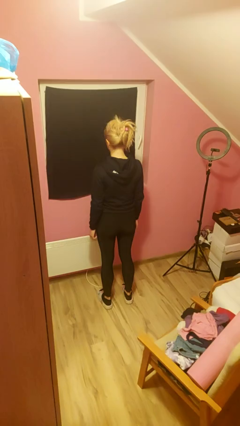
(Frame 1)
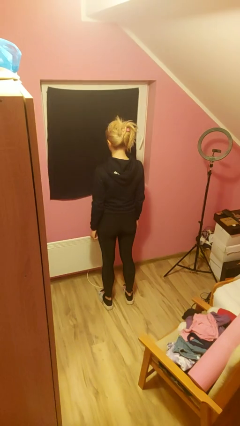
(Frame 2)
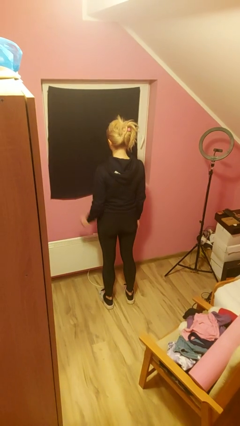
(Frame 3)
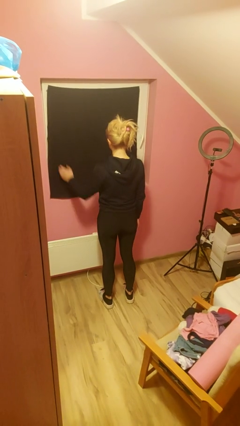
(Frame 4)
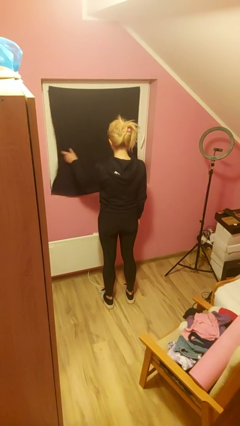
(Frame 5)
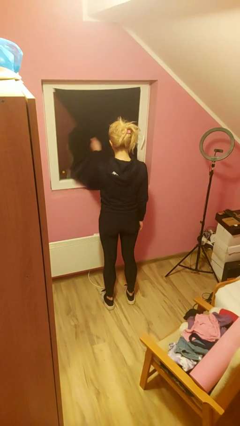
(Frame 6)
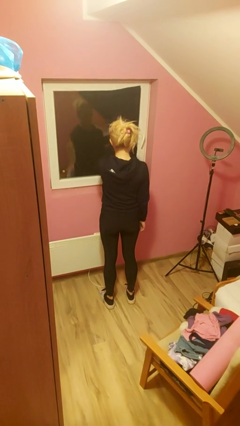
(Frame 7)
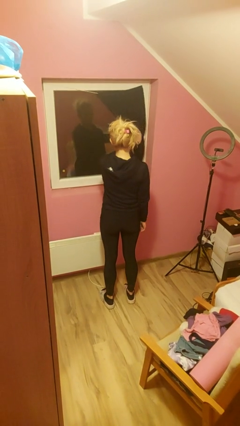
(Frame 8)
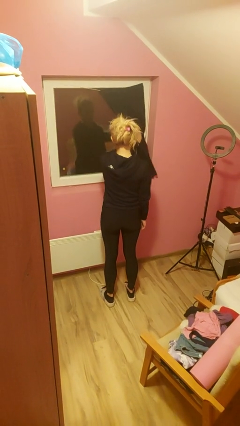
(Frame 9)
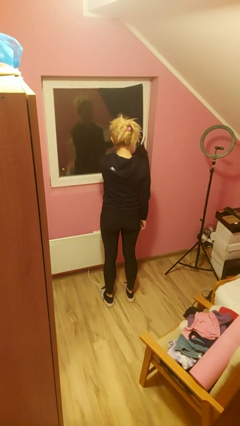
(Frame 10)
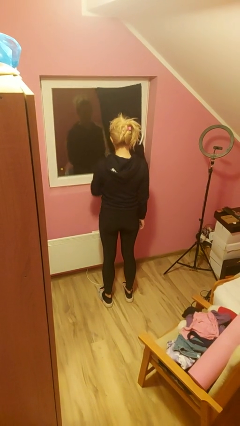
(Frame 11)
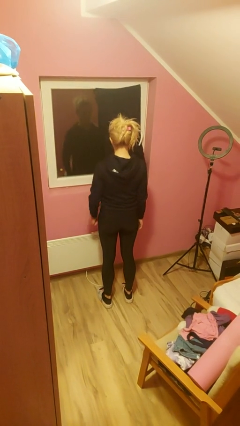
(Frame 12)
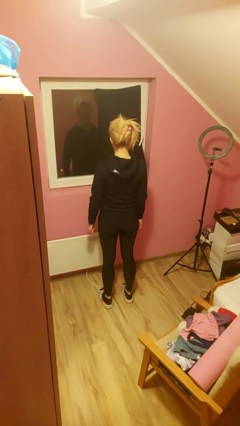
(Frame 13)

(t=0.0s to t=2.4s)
person opens curtains

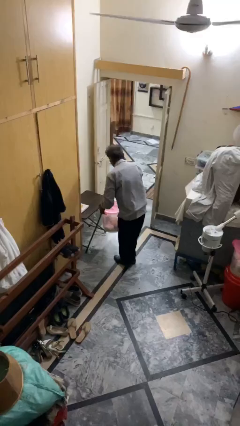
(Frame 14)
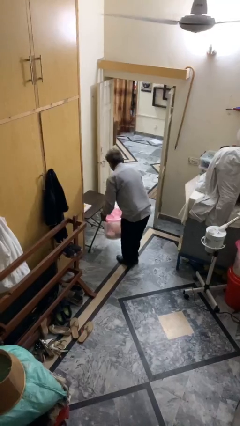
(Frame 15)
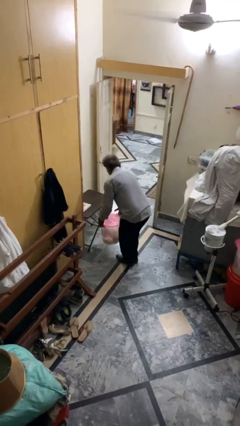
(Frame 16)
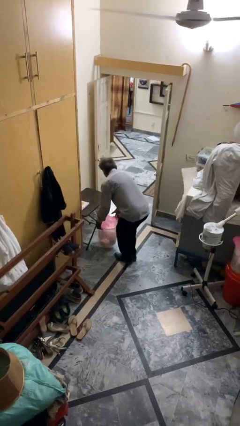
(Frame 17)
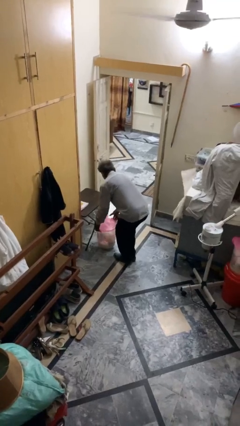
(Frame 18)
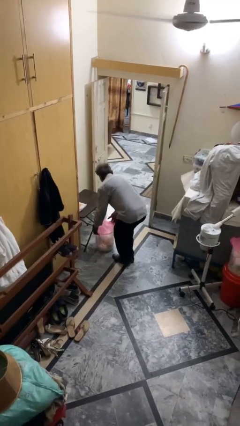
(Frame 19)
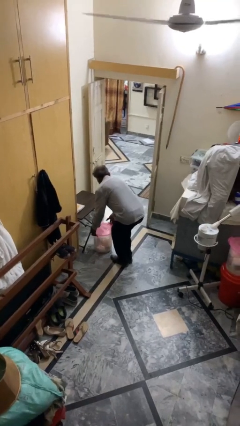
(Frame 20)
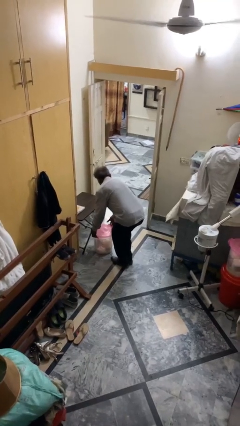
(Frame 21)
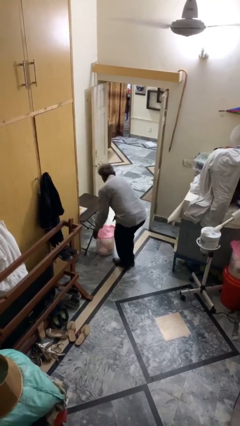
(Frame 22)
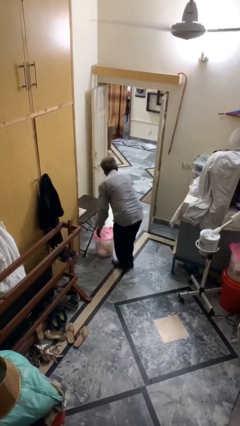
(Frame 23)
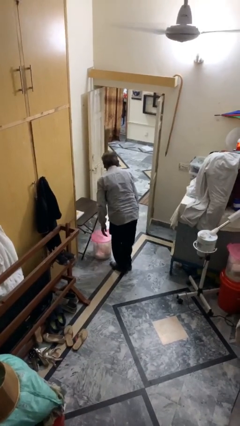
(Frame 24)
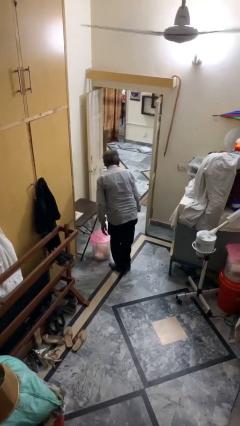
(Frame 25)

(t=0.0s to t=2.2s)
person puts down object on floor

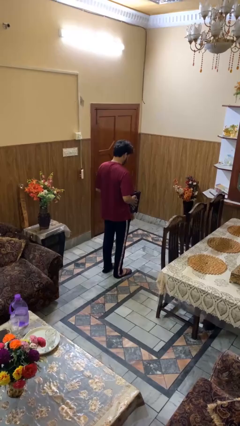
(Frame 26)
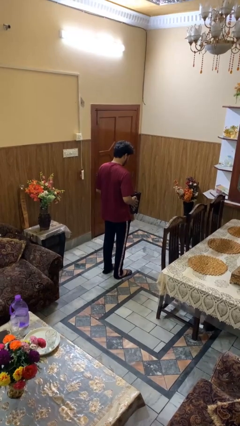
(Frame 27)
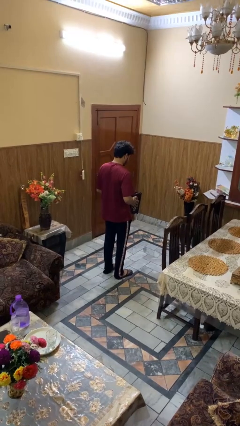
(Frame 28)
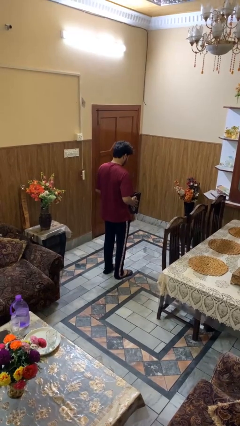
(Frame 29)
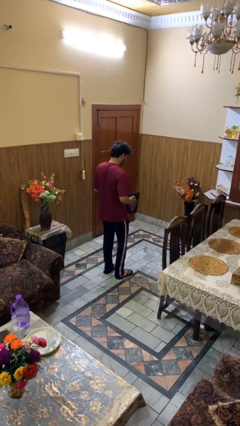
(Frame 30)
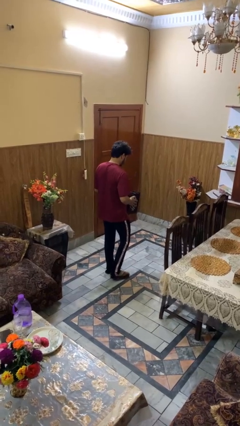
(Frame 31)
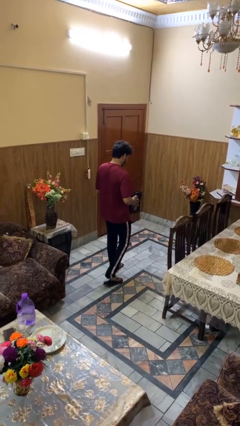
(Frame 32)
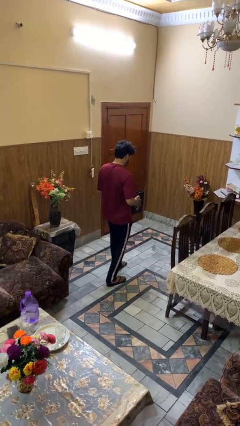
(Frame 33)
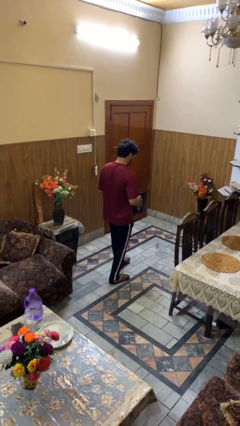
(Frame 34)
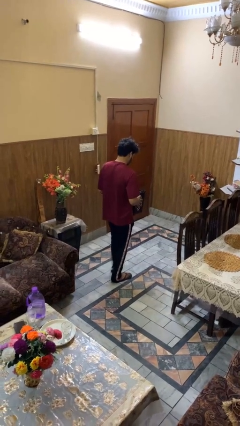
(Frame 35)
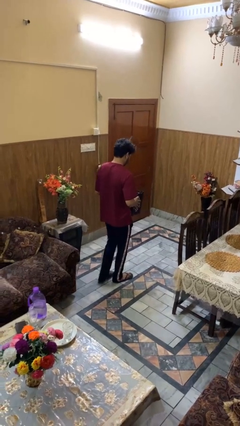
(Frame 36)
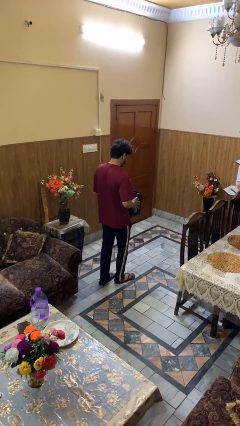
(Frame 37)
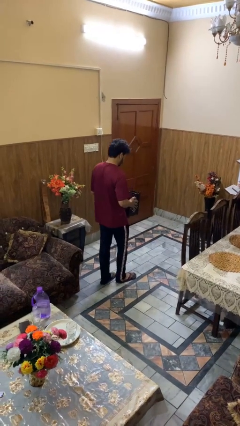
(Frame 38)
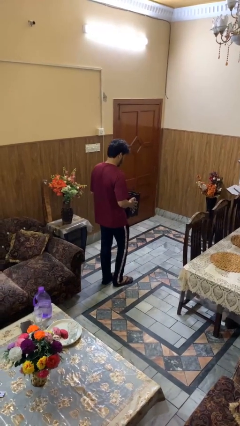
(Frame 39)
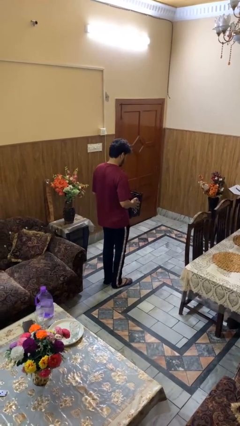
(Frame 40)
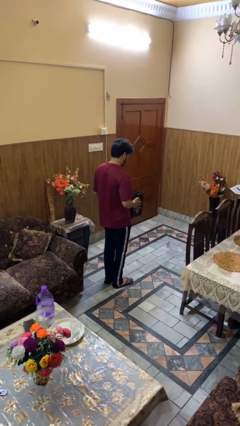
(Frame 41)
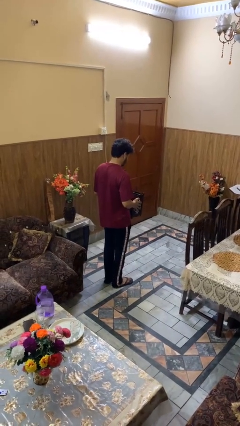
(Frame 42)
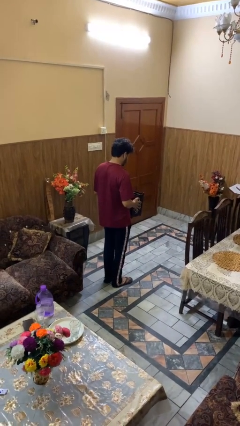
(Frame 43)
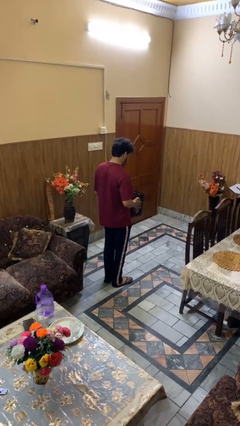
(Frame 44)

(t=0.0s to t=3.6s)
person carries groceries

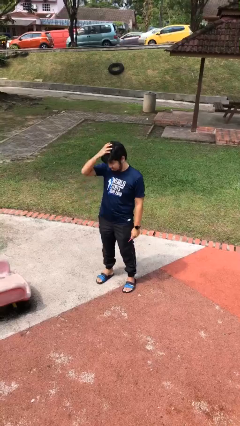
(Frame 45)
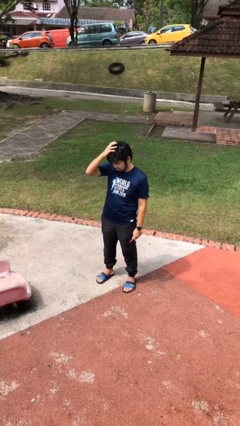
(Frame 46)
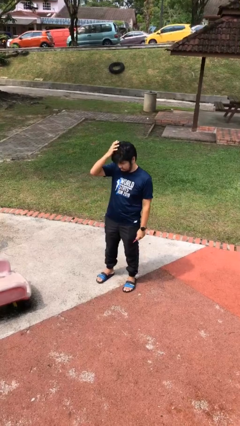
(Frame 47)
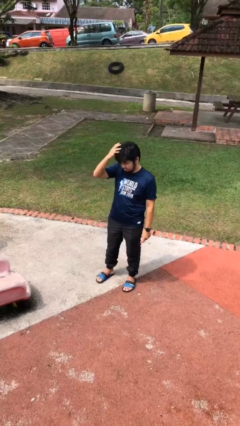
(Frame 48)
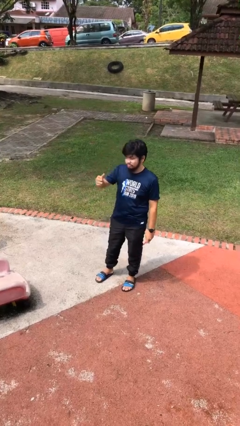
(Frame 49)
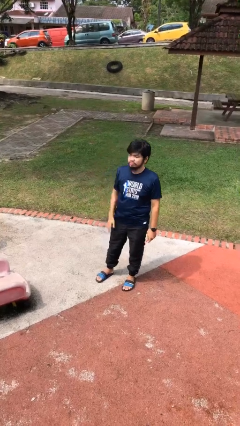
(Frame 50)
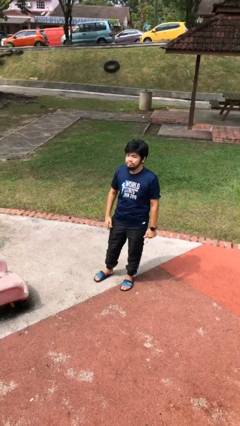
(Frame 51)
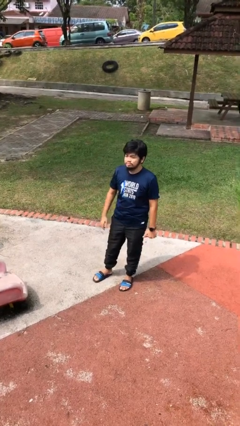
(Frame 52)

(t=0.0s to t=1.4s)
person pats head

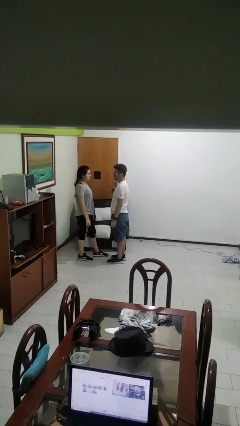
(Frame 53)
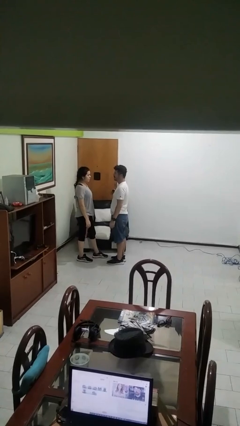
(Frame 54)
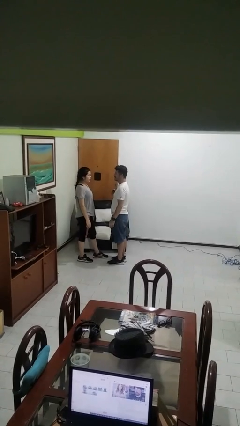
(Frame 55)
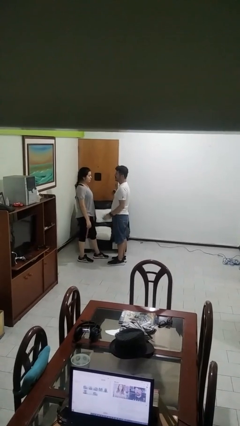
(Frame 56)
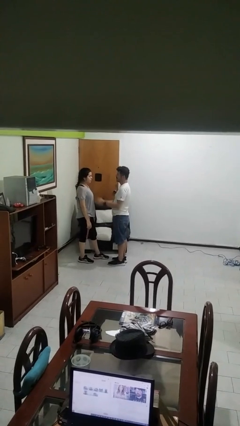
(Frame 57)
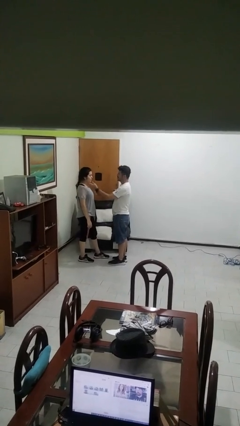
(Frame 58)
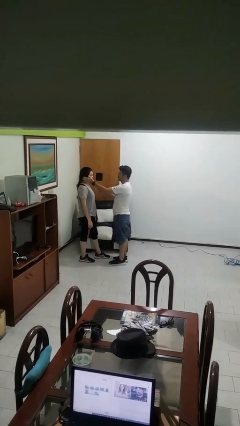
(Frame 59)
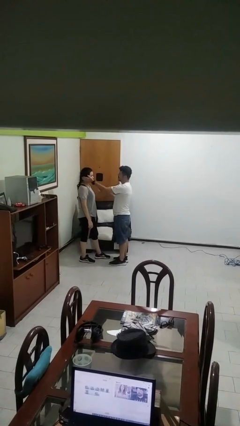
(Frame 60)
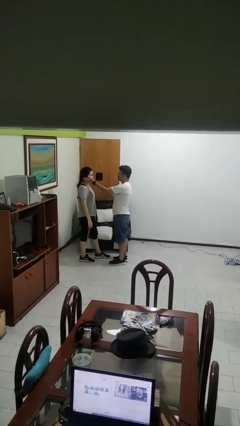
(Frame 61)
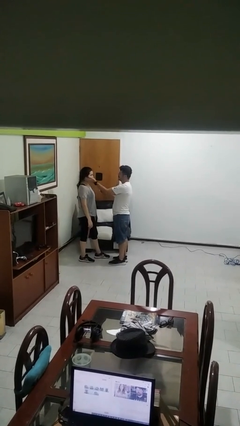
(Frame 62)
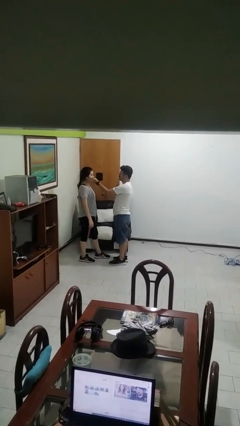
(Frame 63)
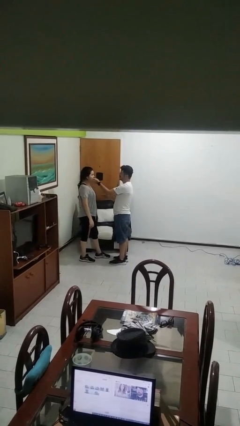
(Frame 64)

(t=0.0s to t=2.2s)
person touches face of person

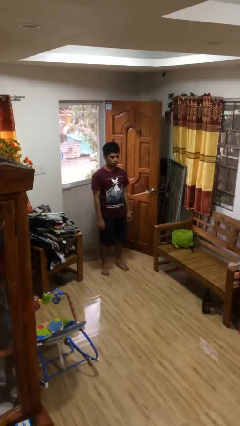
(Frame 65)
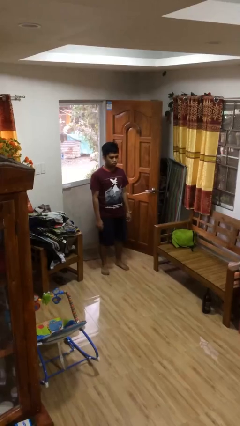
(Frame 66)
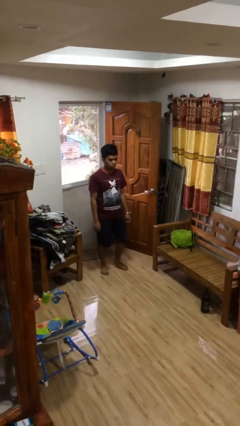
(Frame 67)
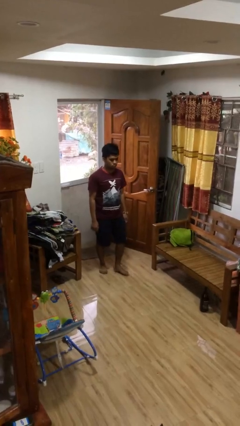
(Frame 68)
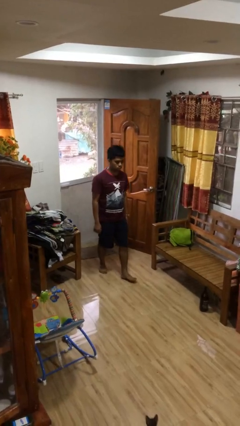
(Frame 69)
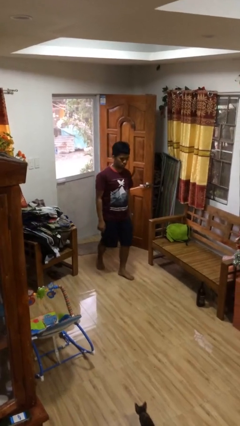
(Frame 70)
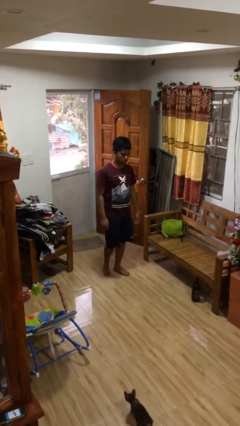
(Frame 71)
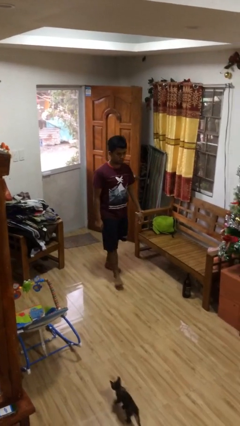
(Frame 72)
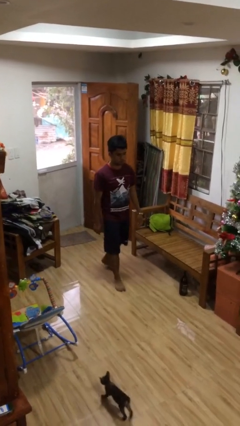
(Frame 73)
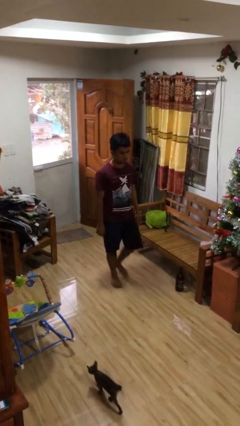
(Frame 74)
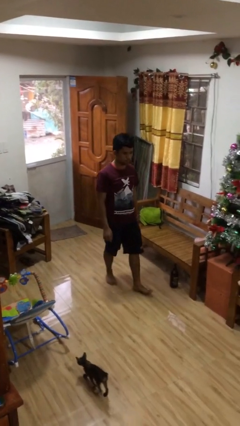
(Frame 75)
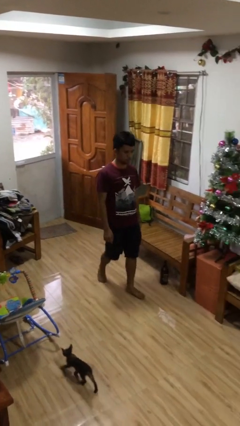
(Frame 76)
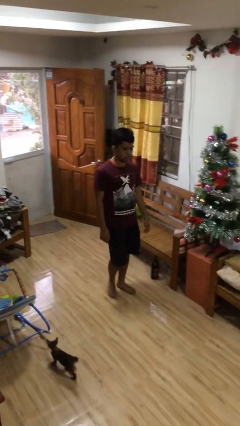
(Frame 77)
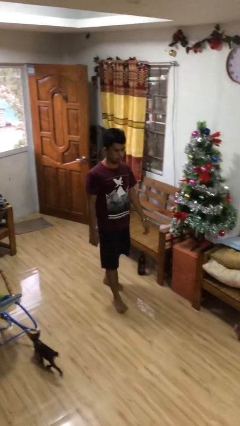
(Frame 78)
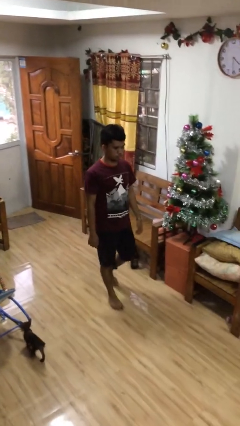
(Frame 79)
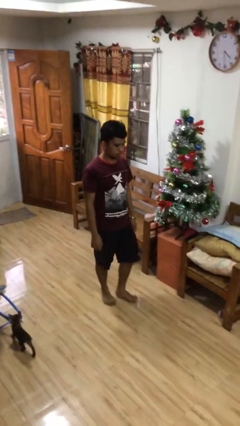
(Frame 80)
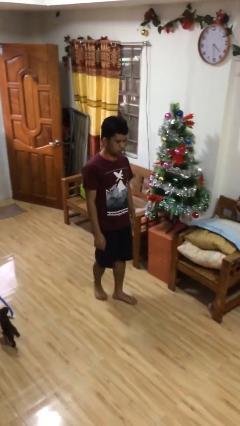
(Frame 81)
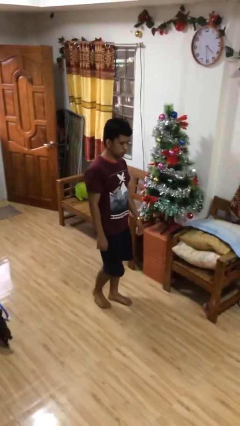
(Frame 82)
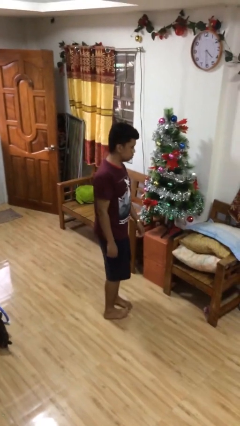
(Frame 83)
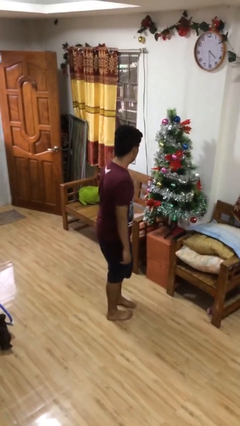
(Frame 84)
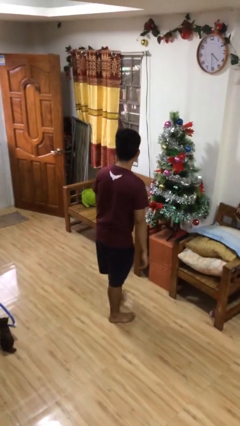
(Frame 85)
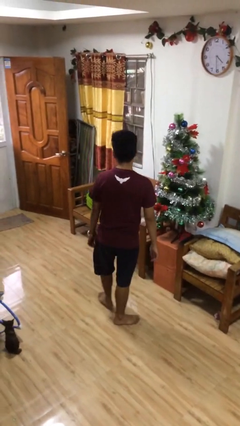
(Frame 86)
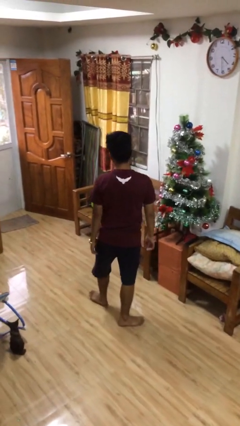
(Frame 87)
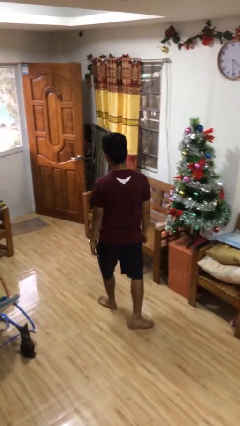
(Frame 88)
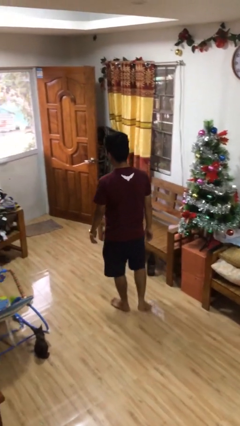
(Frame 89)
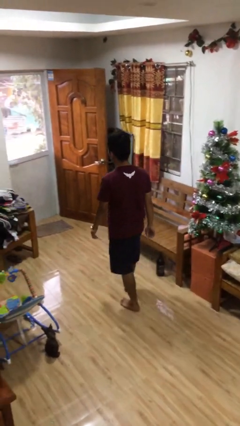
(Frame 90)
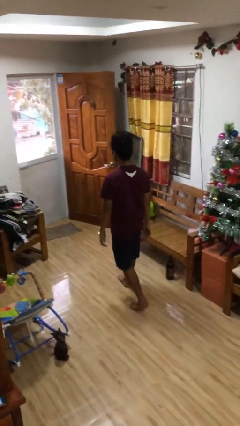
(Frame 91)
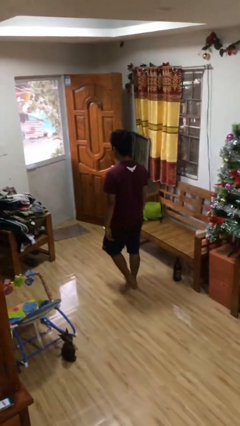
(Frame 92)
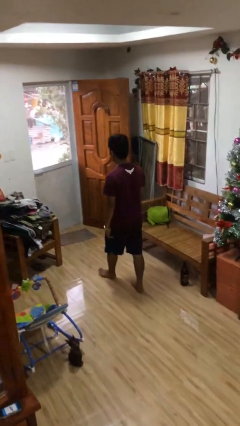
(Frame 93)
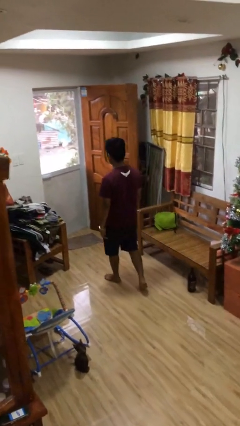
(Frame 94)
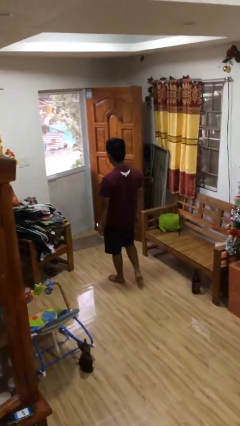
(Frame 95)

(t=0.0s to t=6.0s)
person walks
